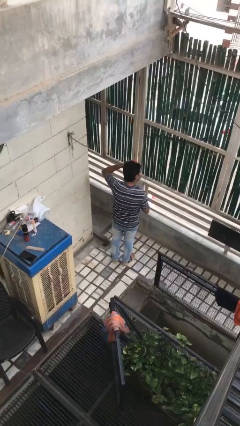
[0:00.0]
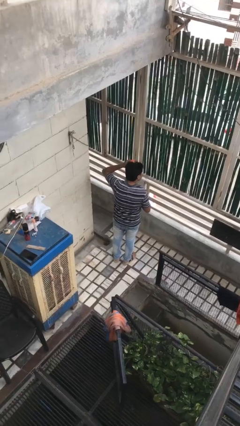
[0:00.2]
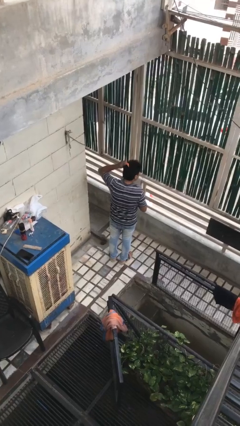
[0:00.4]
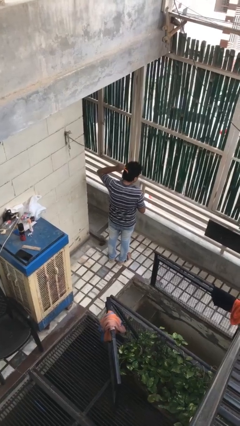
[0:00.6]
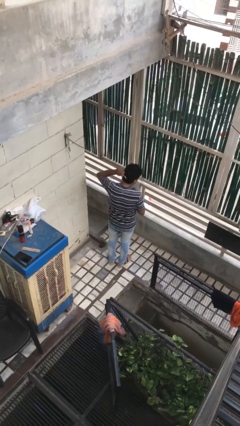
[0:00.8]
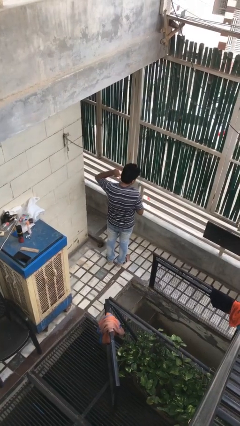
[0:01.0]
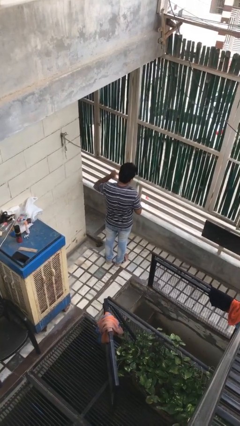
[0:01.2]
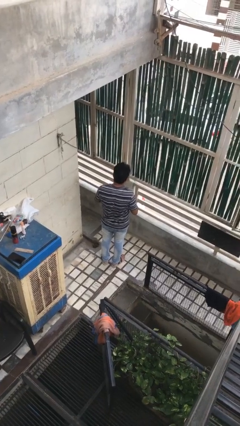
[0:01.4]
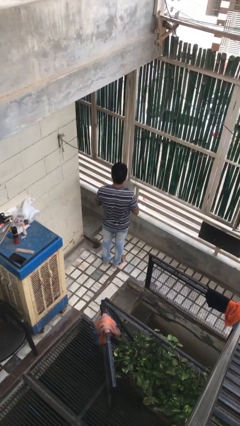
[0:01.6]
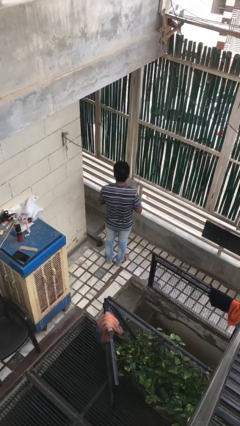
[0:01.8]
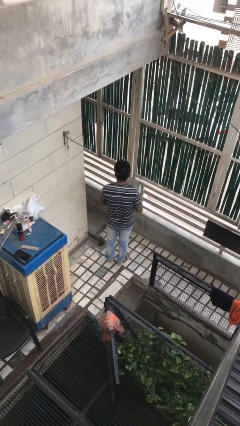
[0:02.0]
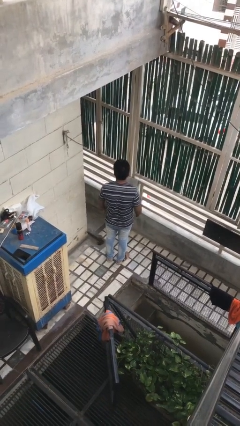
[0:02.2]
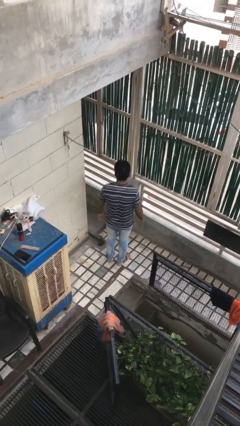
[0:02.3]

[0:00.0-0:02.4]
person brushes hair

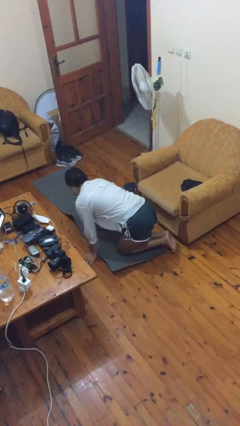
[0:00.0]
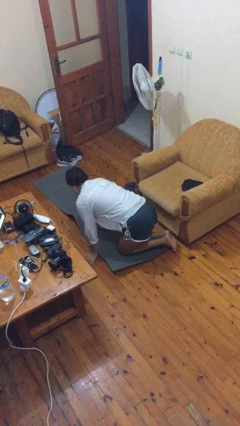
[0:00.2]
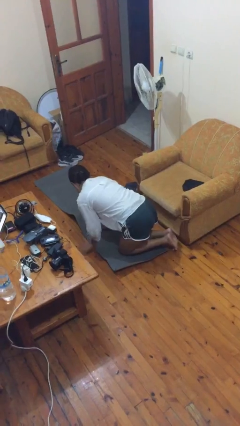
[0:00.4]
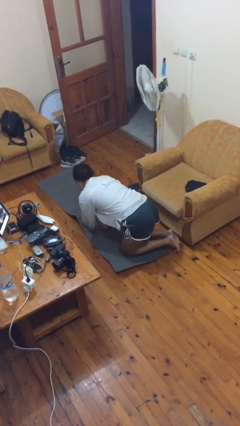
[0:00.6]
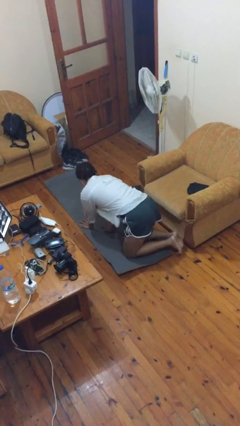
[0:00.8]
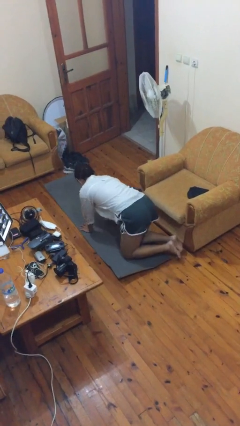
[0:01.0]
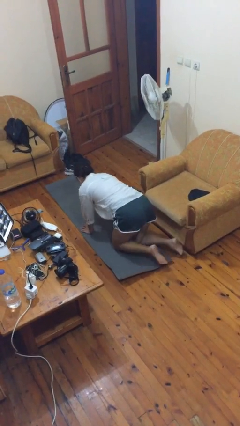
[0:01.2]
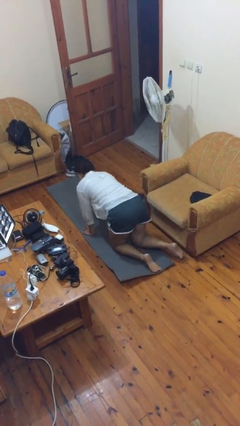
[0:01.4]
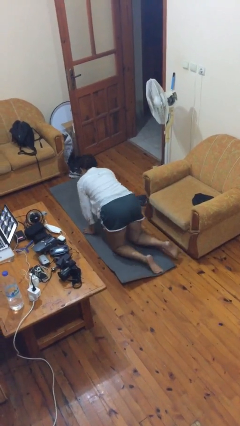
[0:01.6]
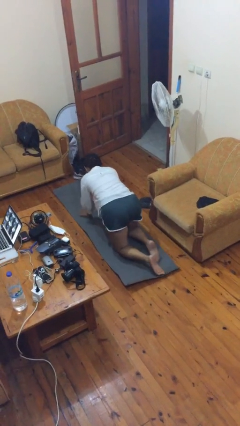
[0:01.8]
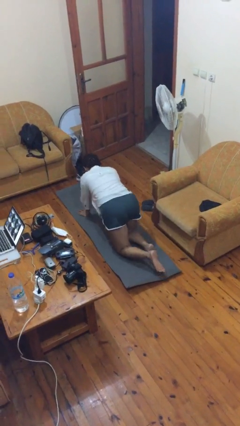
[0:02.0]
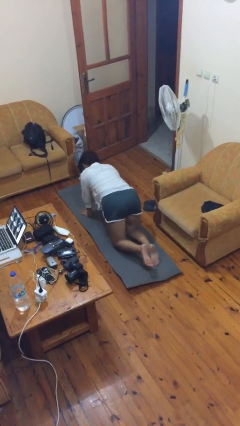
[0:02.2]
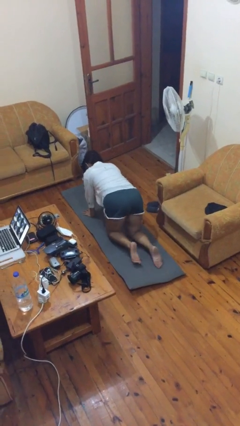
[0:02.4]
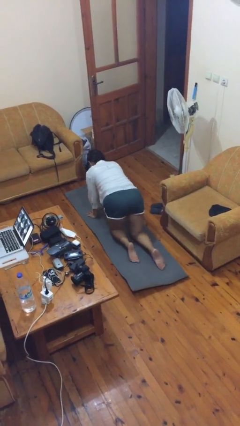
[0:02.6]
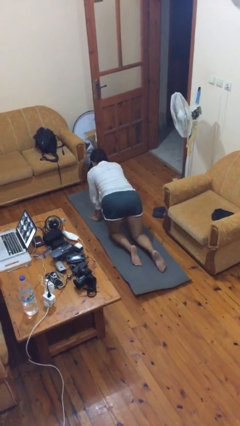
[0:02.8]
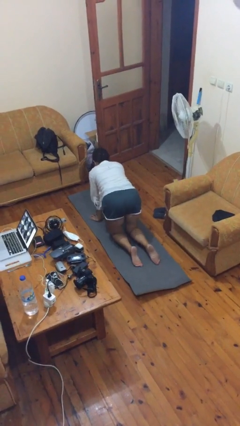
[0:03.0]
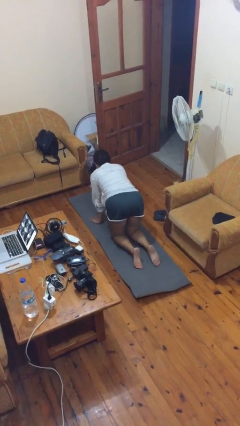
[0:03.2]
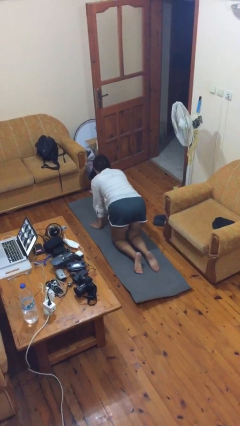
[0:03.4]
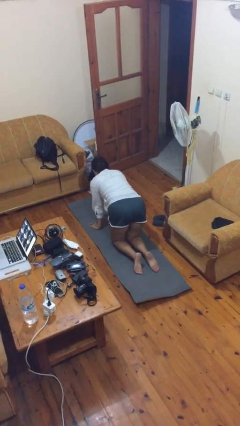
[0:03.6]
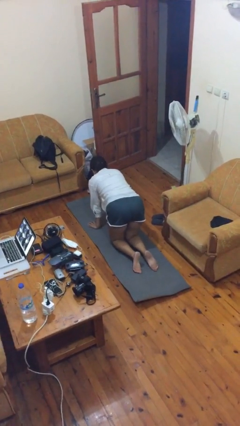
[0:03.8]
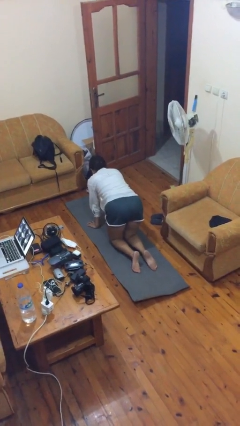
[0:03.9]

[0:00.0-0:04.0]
person crawls

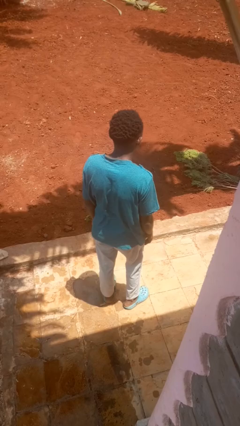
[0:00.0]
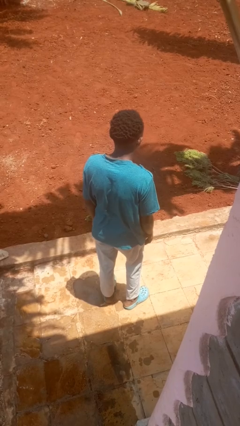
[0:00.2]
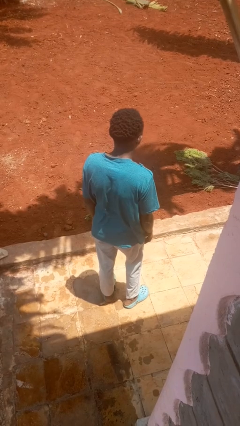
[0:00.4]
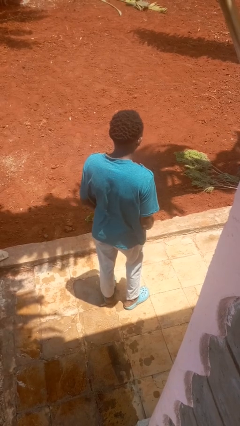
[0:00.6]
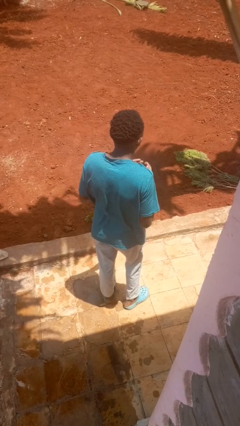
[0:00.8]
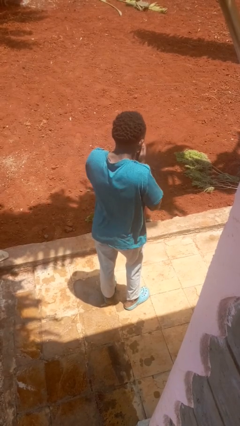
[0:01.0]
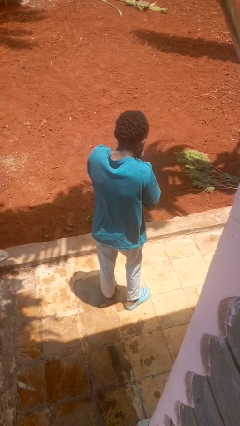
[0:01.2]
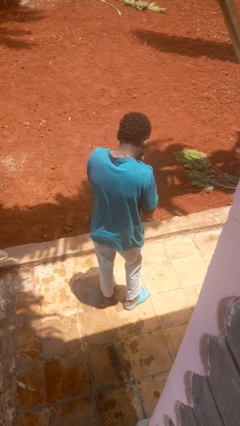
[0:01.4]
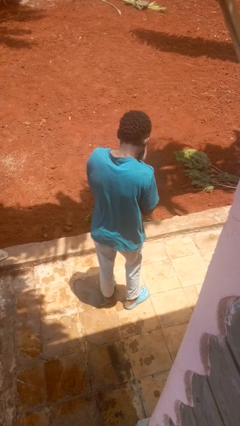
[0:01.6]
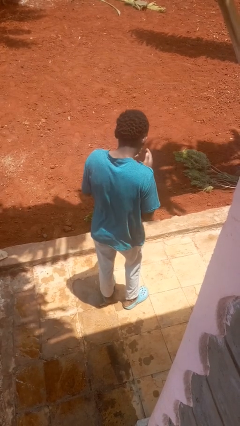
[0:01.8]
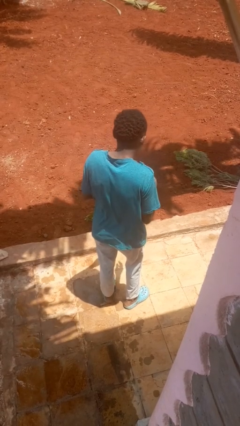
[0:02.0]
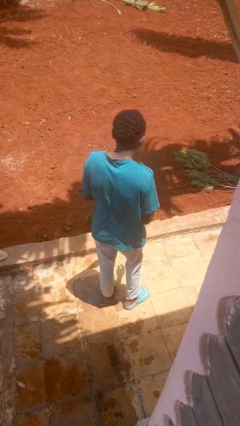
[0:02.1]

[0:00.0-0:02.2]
person sneezes into hand

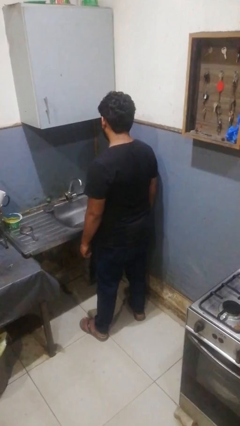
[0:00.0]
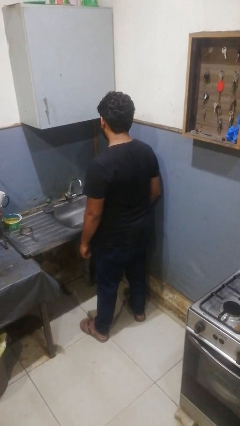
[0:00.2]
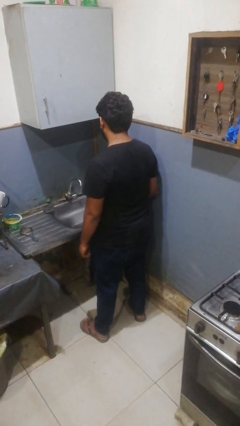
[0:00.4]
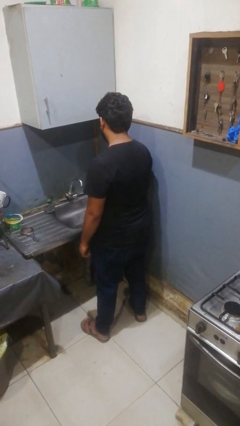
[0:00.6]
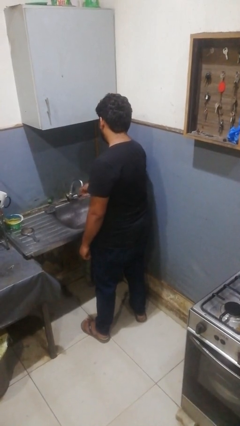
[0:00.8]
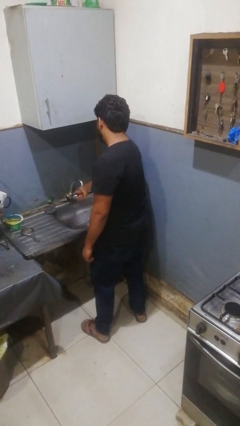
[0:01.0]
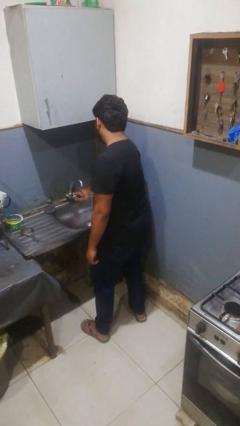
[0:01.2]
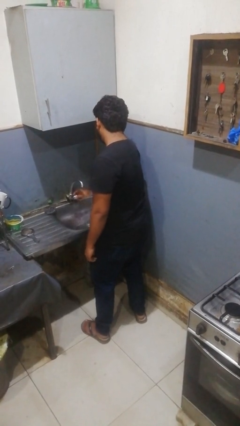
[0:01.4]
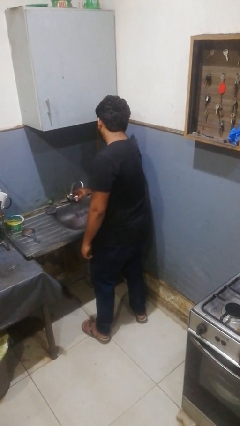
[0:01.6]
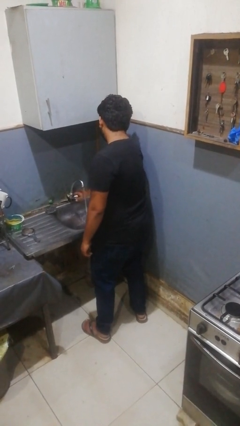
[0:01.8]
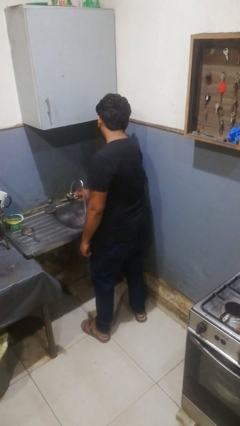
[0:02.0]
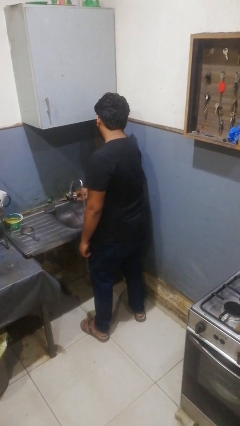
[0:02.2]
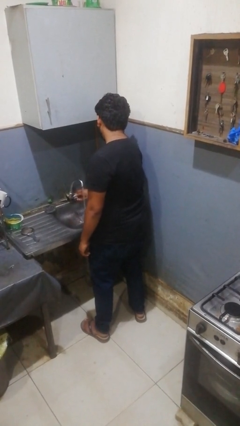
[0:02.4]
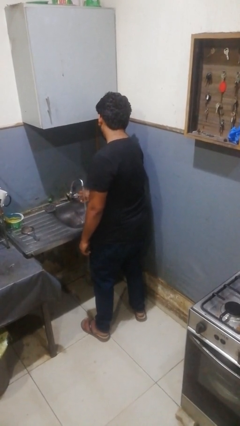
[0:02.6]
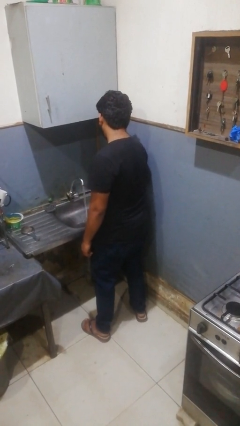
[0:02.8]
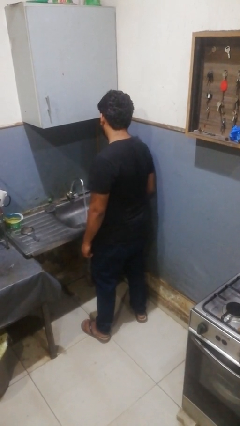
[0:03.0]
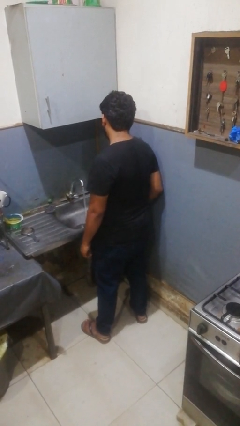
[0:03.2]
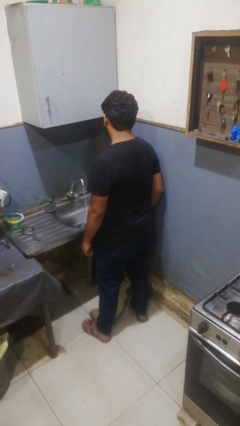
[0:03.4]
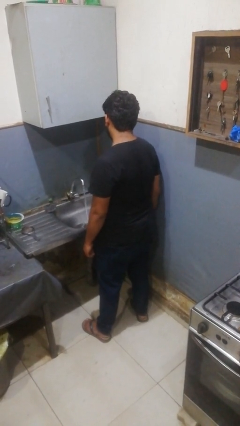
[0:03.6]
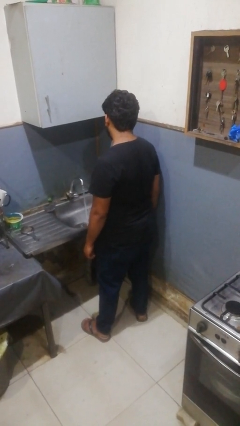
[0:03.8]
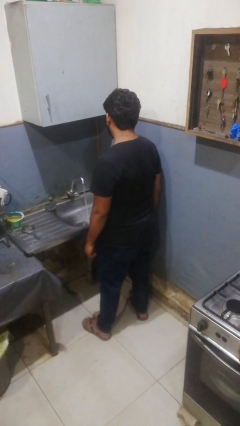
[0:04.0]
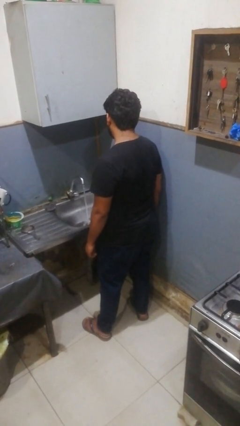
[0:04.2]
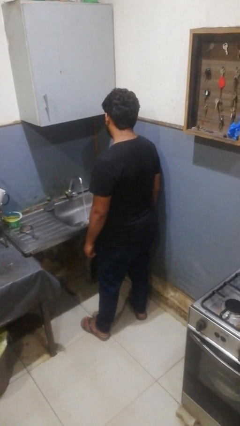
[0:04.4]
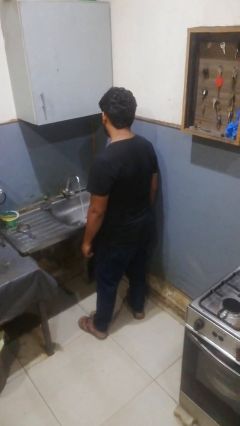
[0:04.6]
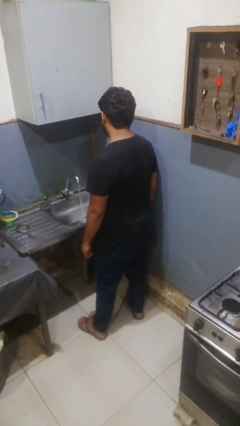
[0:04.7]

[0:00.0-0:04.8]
person turns on faucet

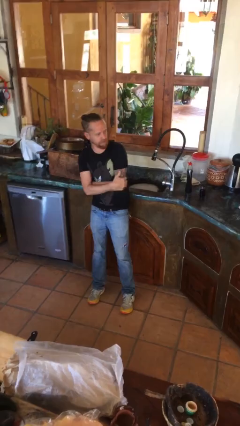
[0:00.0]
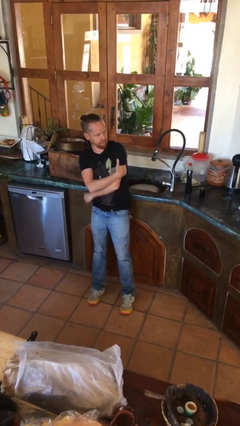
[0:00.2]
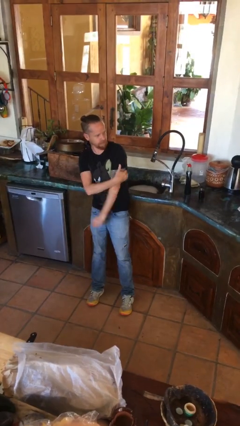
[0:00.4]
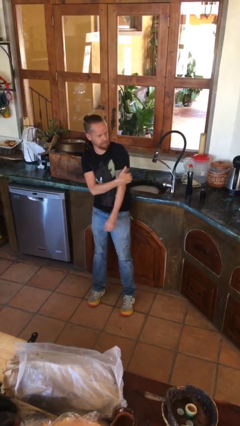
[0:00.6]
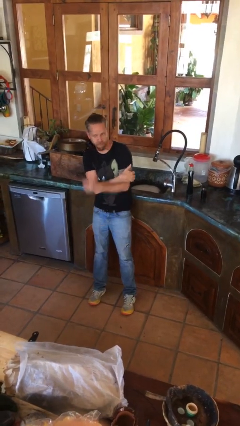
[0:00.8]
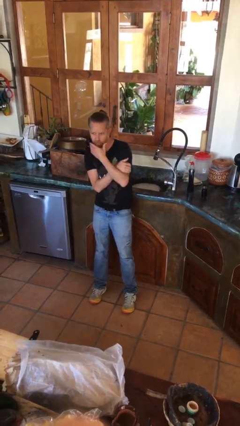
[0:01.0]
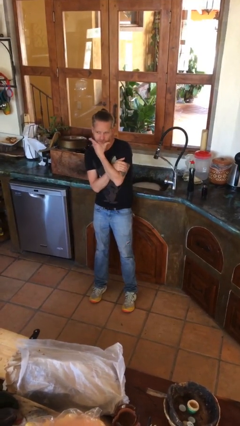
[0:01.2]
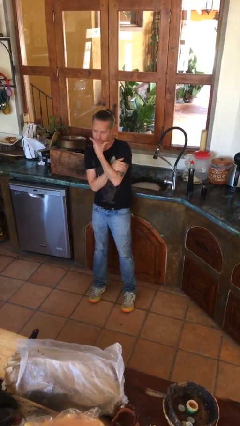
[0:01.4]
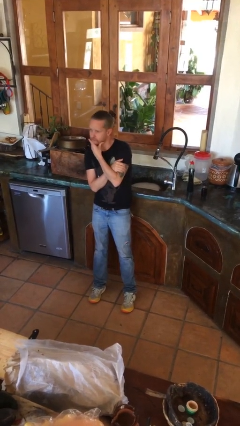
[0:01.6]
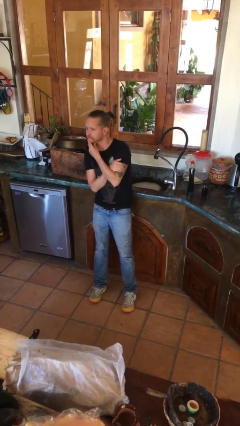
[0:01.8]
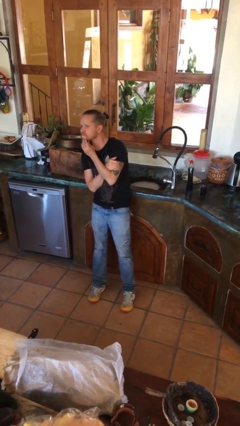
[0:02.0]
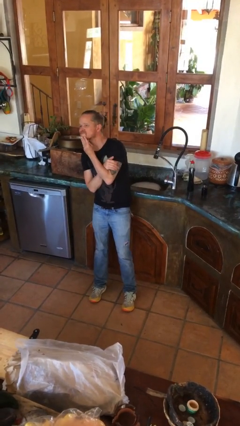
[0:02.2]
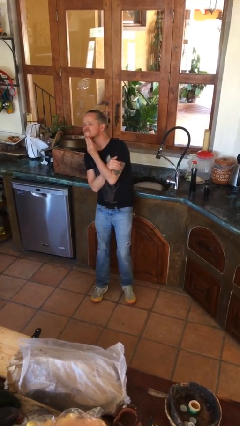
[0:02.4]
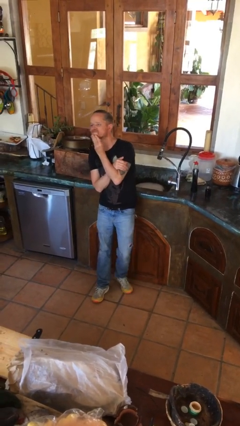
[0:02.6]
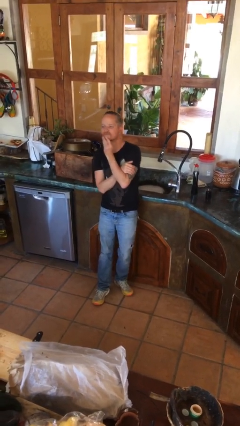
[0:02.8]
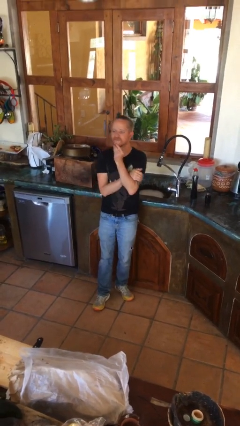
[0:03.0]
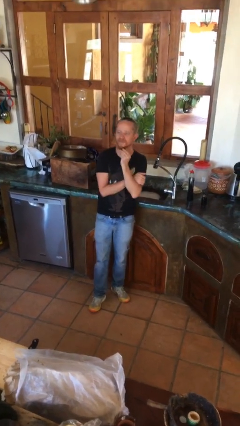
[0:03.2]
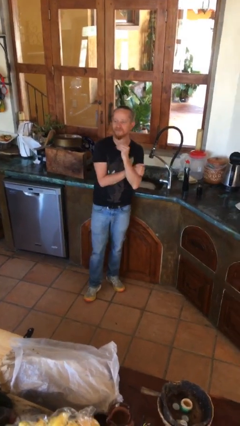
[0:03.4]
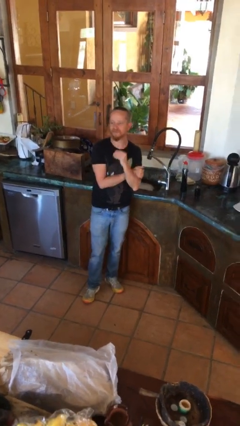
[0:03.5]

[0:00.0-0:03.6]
person strokes chin

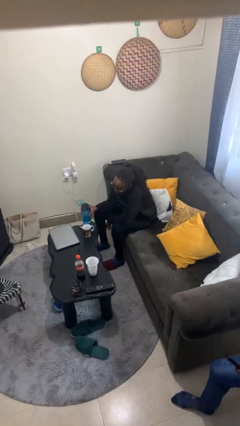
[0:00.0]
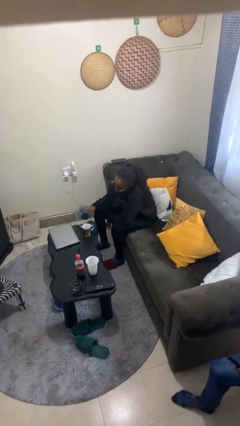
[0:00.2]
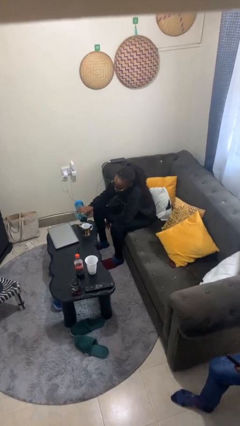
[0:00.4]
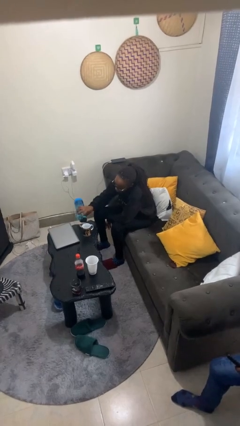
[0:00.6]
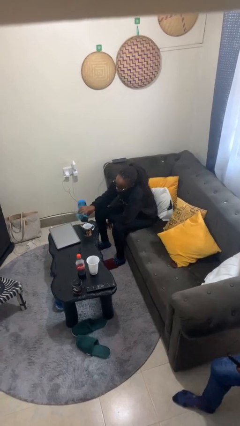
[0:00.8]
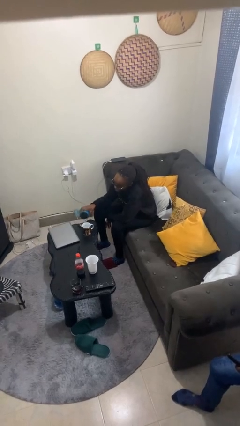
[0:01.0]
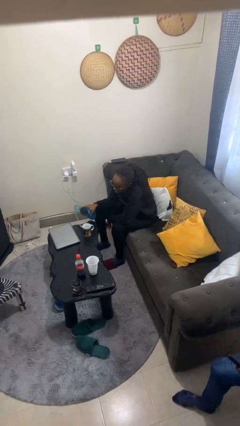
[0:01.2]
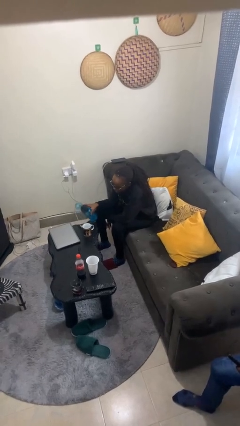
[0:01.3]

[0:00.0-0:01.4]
person pours liquid into cup
